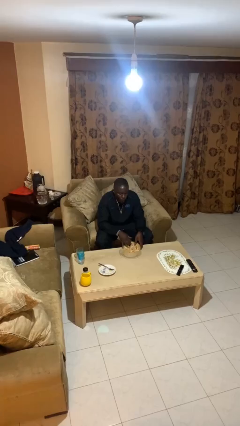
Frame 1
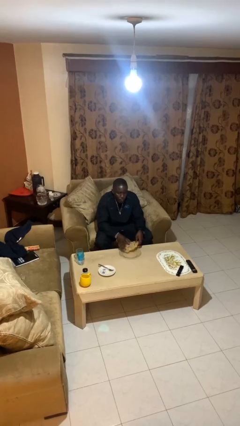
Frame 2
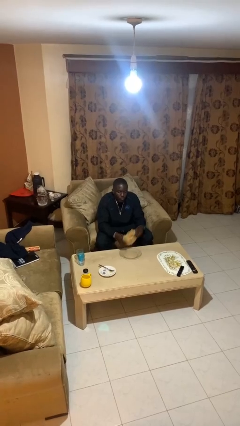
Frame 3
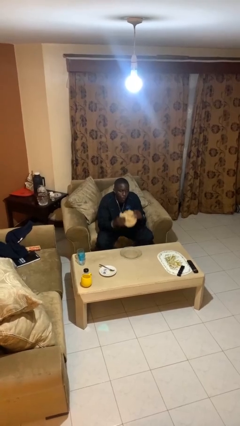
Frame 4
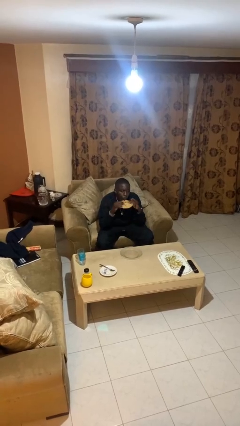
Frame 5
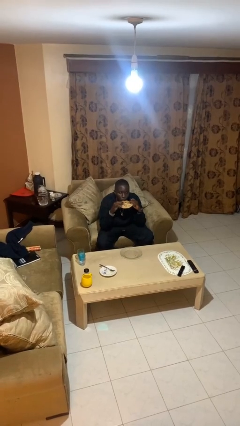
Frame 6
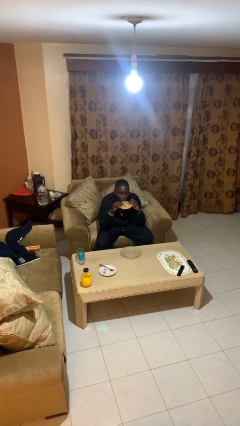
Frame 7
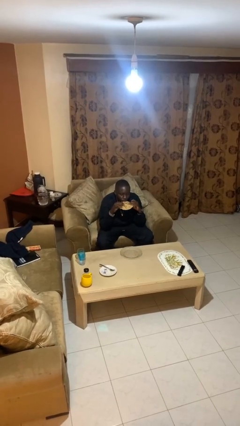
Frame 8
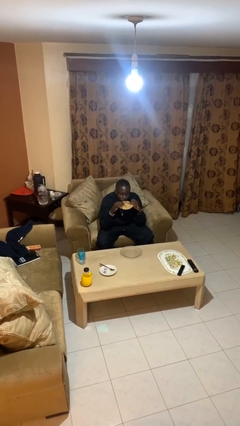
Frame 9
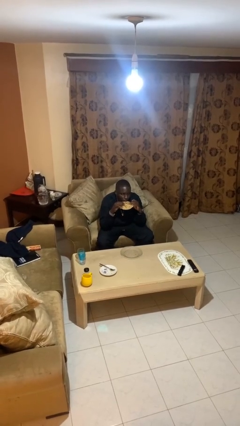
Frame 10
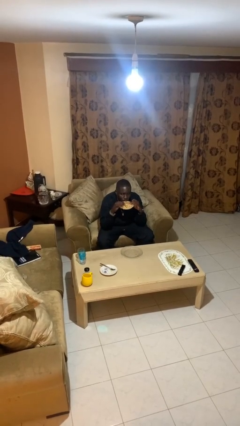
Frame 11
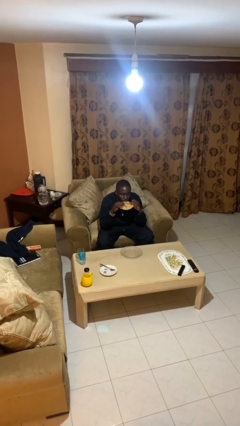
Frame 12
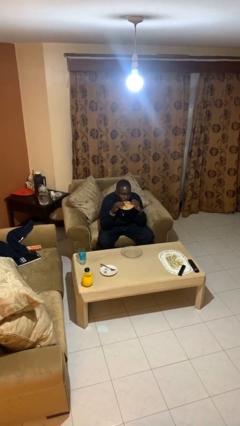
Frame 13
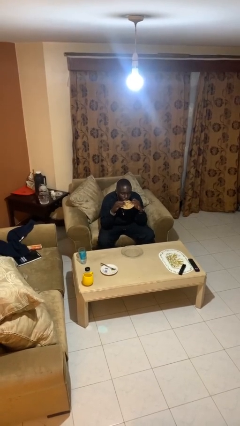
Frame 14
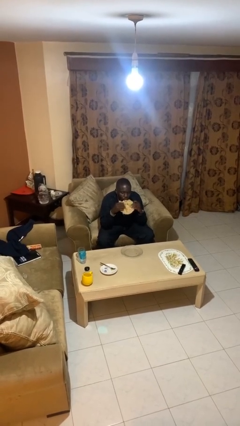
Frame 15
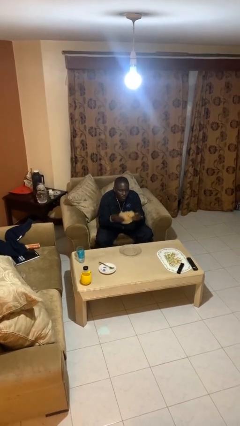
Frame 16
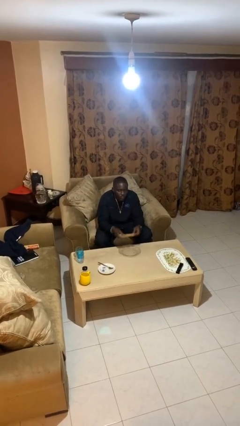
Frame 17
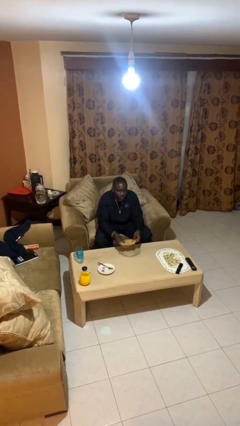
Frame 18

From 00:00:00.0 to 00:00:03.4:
person eats with hands

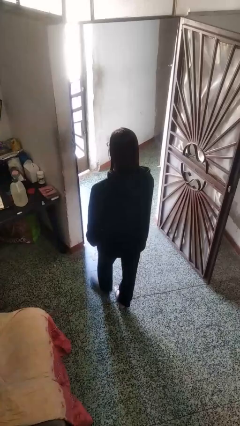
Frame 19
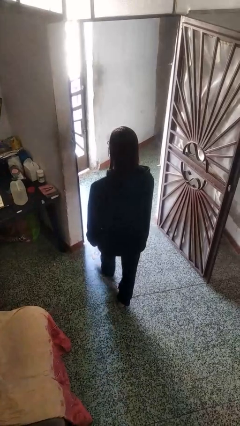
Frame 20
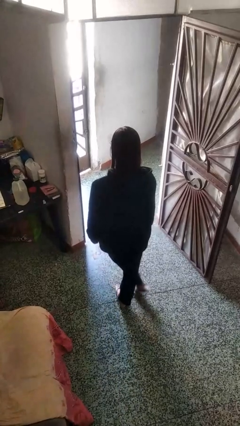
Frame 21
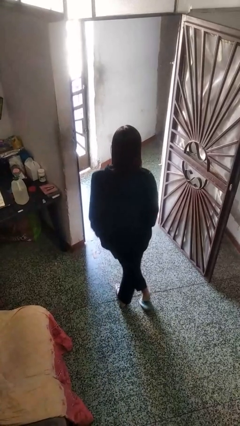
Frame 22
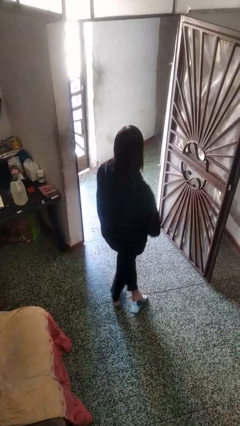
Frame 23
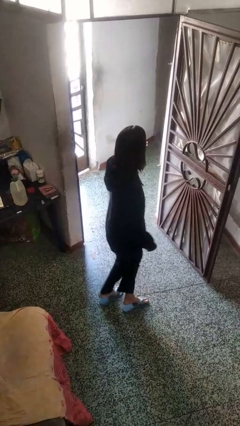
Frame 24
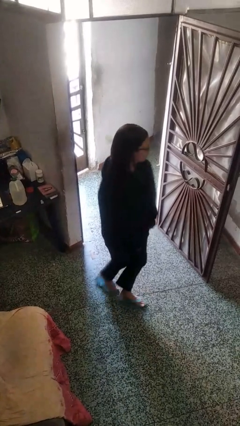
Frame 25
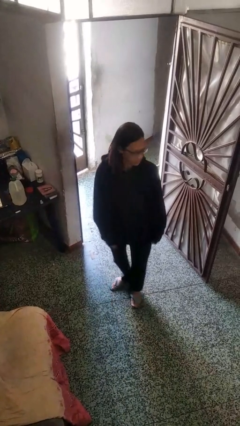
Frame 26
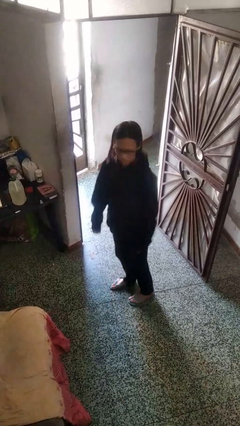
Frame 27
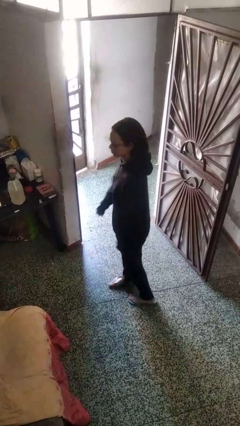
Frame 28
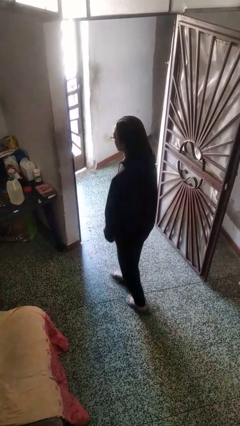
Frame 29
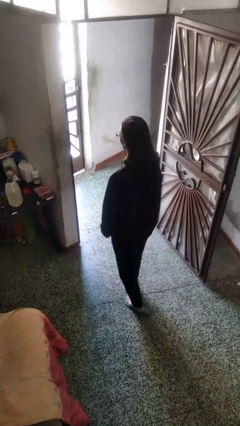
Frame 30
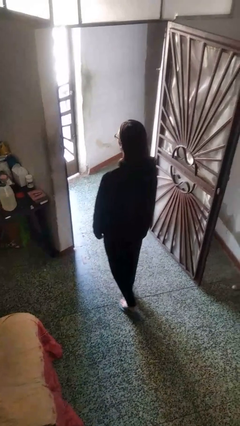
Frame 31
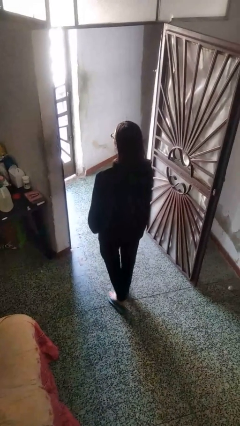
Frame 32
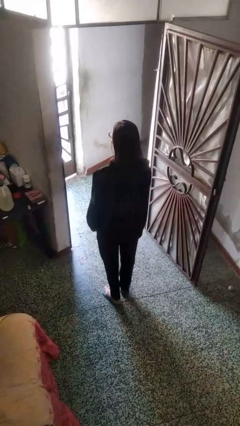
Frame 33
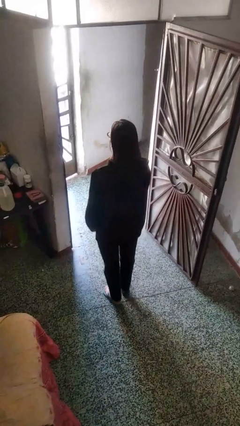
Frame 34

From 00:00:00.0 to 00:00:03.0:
person twirls

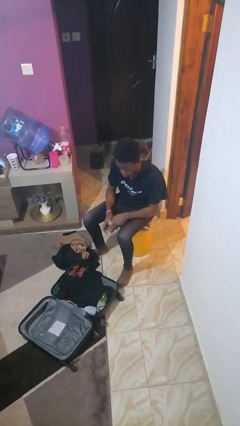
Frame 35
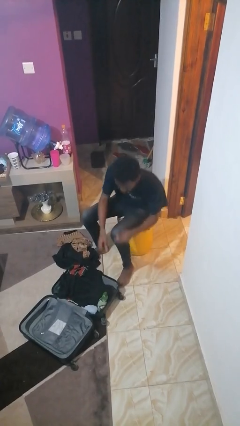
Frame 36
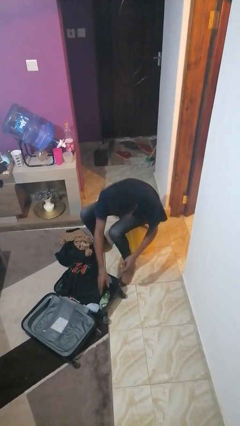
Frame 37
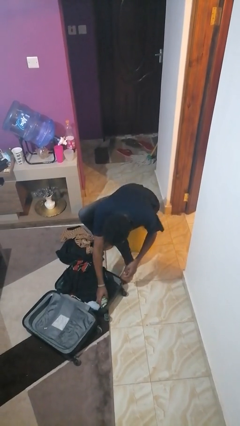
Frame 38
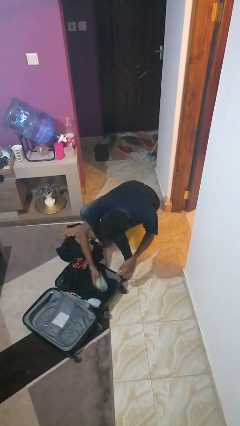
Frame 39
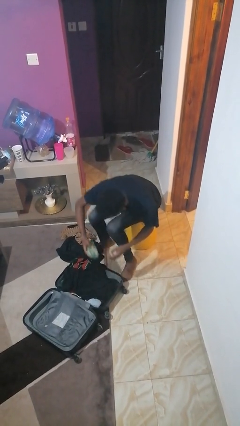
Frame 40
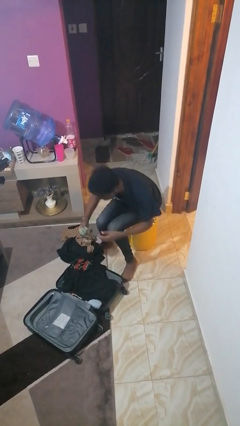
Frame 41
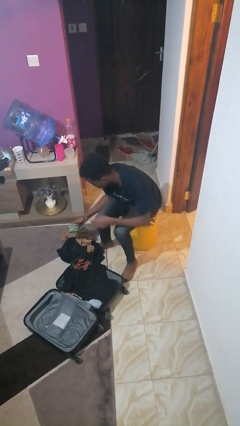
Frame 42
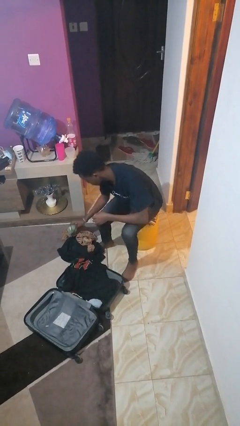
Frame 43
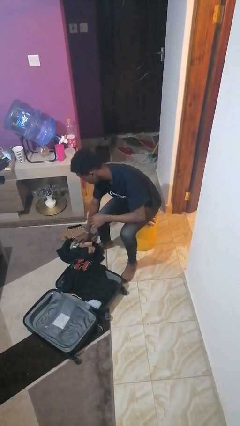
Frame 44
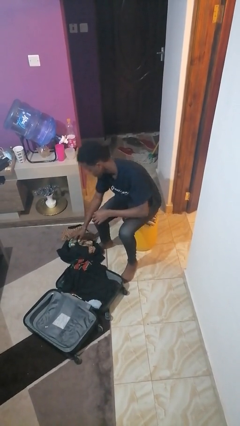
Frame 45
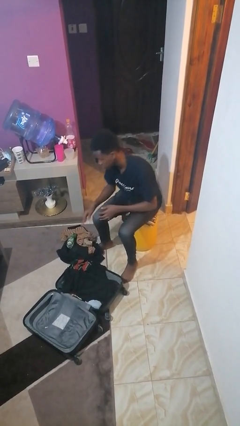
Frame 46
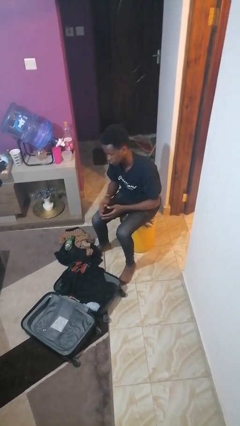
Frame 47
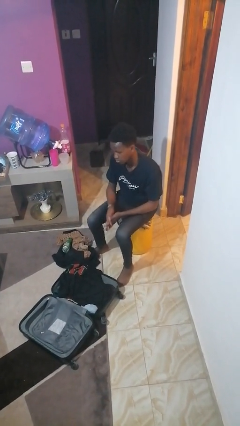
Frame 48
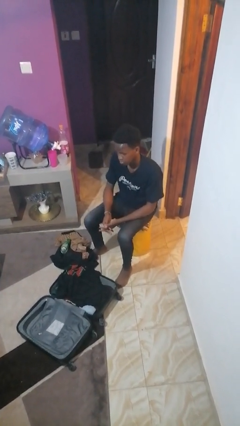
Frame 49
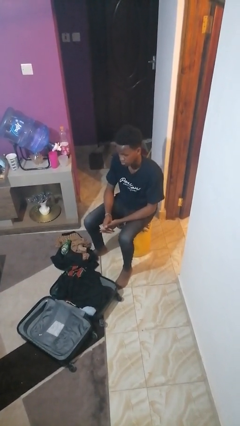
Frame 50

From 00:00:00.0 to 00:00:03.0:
person unloads clothes from suitcase

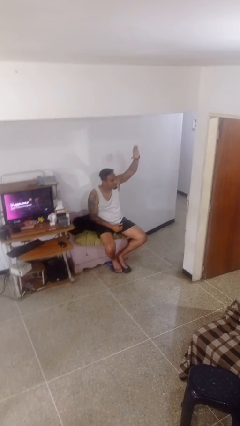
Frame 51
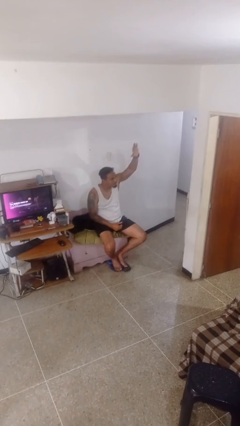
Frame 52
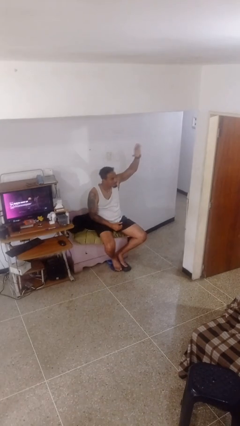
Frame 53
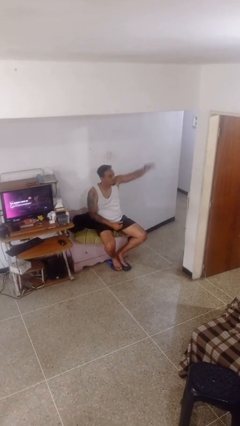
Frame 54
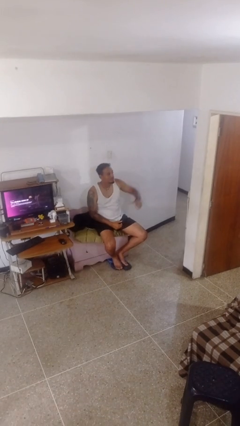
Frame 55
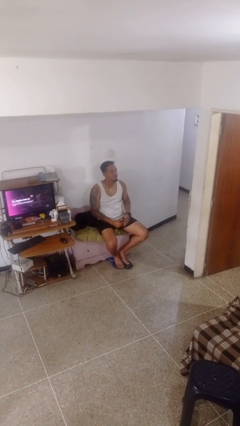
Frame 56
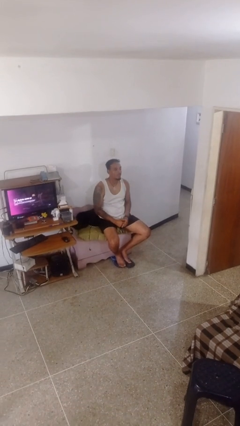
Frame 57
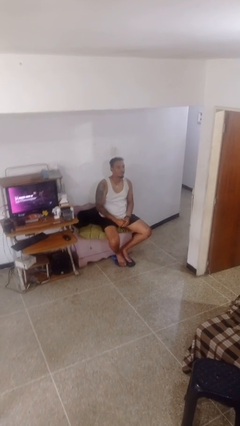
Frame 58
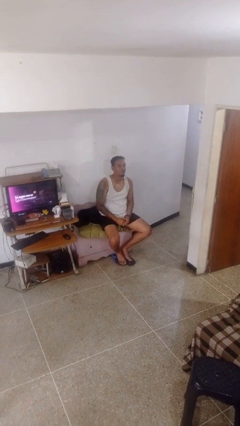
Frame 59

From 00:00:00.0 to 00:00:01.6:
person gestures lower hand

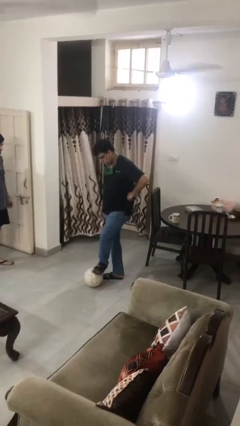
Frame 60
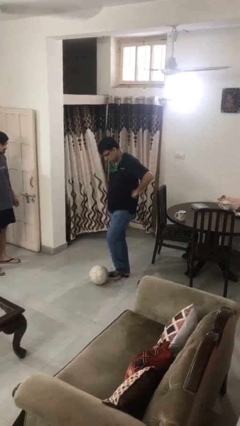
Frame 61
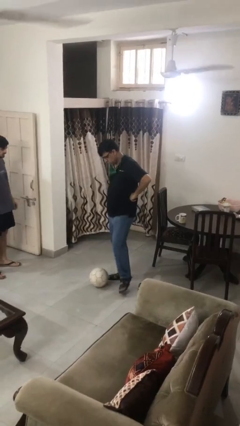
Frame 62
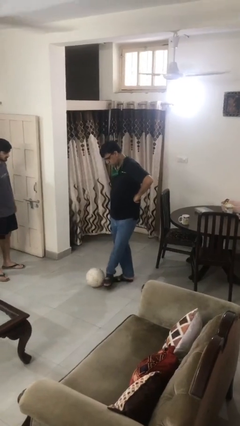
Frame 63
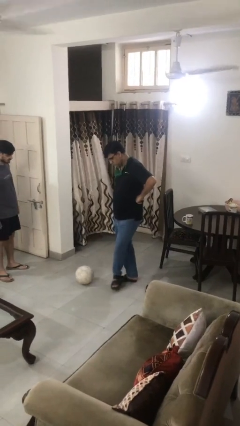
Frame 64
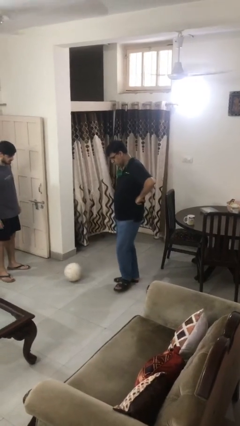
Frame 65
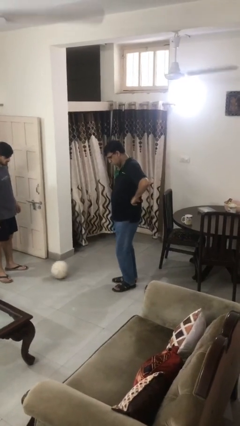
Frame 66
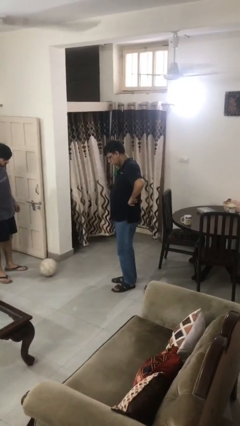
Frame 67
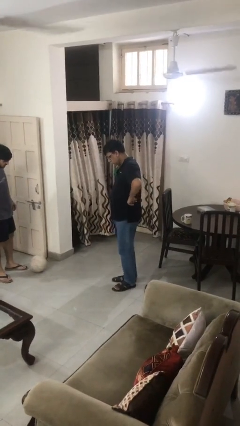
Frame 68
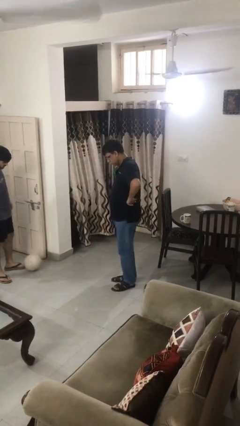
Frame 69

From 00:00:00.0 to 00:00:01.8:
person kicks object to person

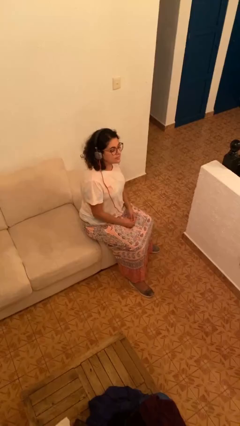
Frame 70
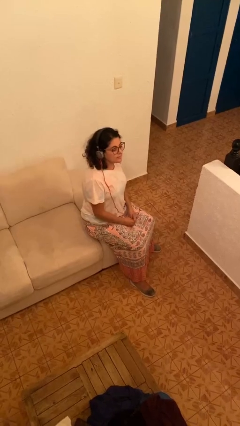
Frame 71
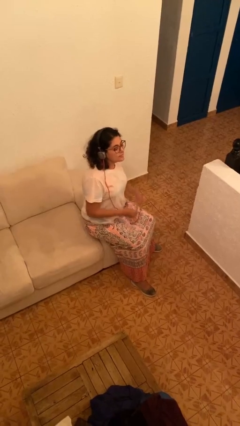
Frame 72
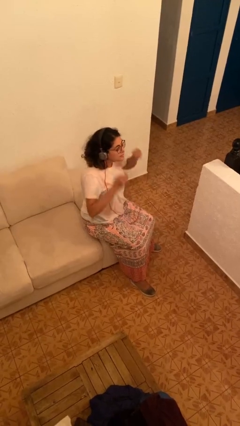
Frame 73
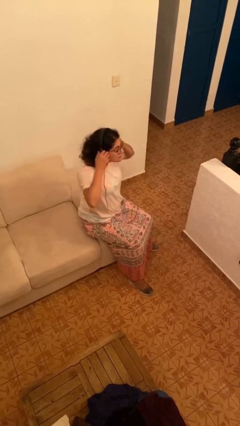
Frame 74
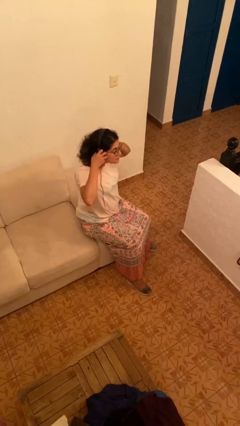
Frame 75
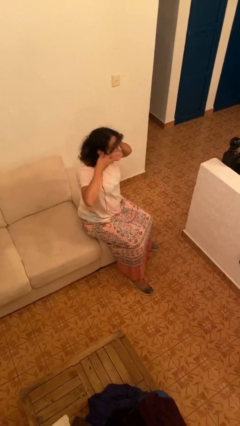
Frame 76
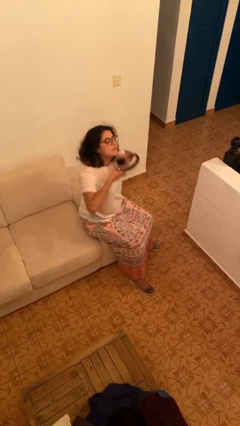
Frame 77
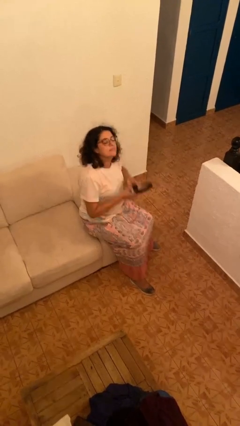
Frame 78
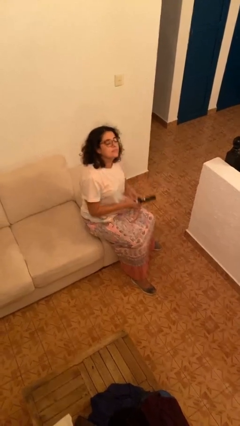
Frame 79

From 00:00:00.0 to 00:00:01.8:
person takes off headphones

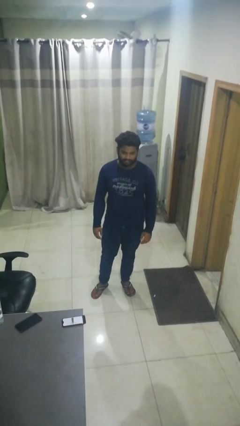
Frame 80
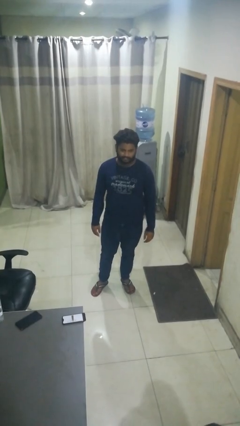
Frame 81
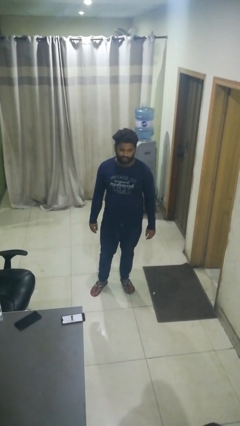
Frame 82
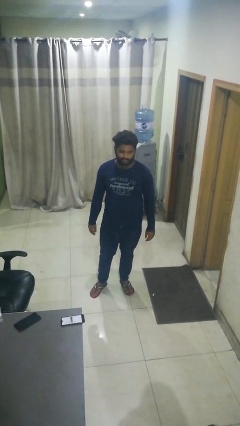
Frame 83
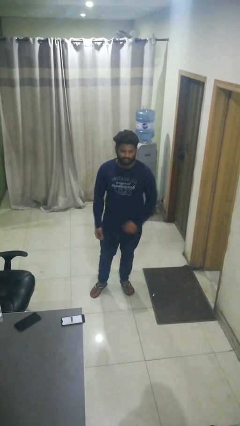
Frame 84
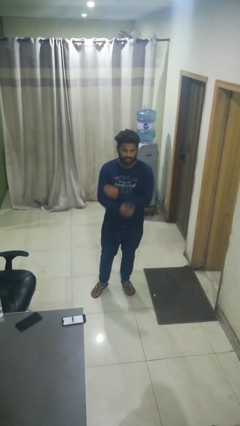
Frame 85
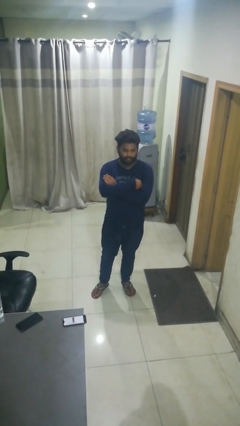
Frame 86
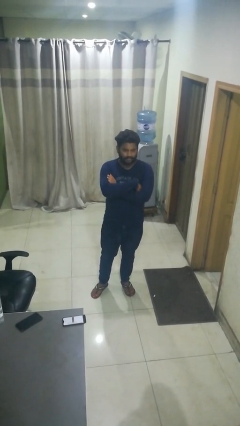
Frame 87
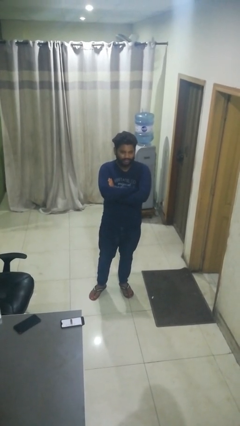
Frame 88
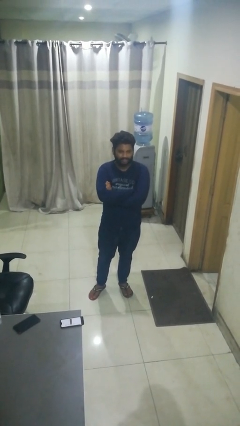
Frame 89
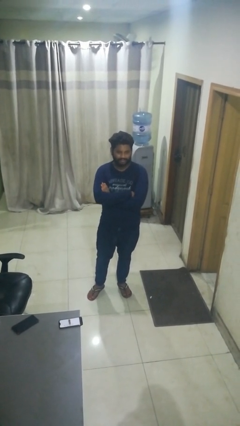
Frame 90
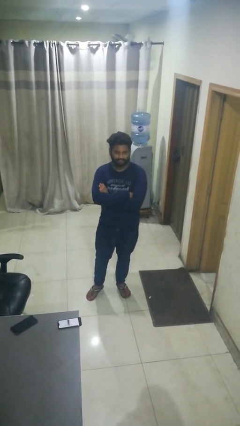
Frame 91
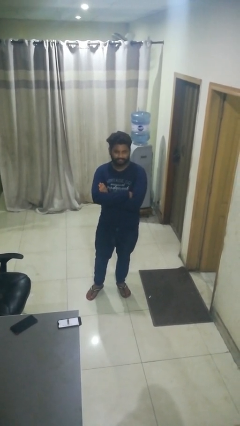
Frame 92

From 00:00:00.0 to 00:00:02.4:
person crosses arms
